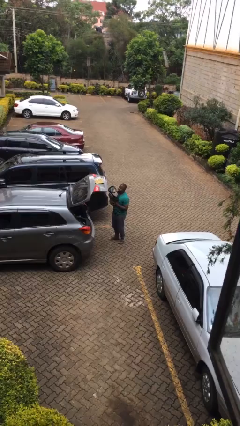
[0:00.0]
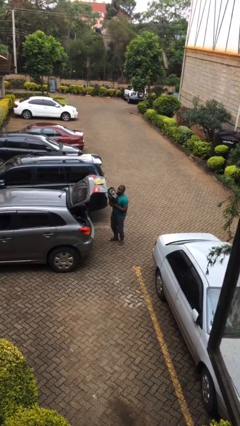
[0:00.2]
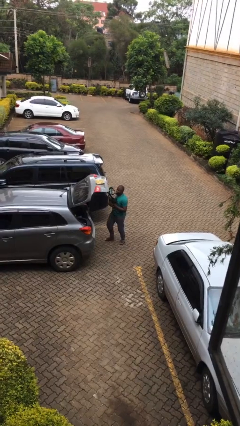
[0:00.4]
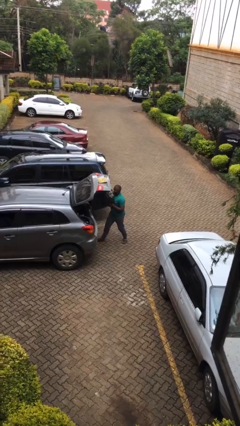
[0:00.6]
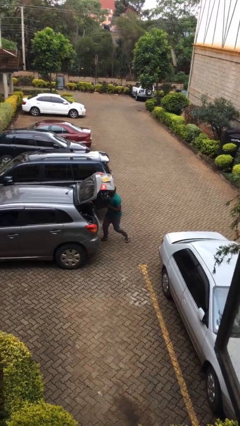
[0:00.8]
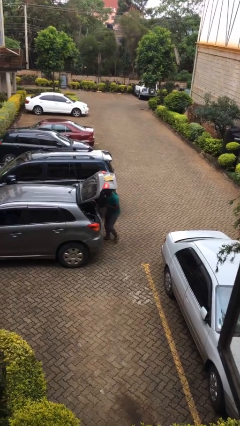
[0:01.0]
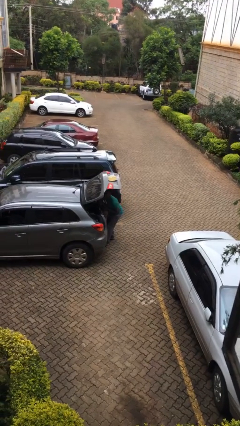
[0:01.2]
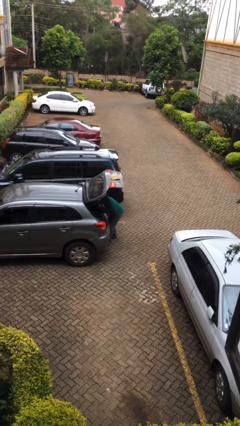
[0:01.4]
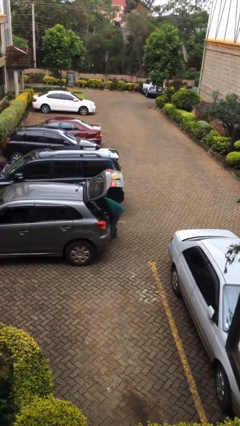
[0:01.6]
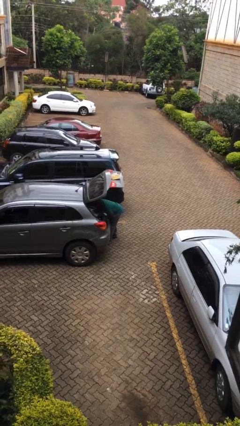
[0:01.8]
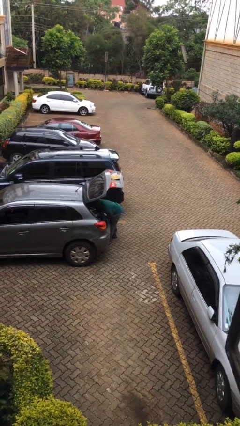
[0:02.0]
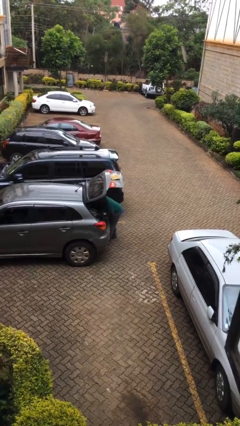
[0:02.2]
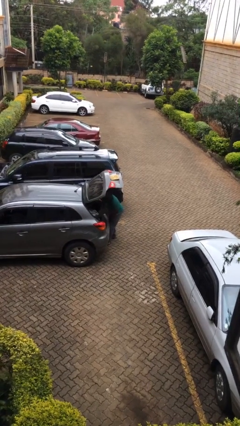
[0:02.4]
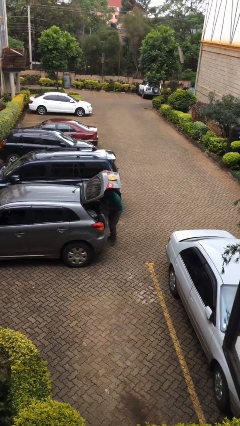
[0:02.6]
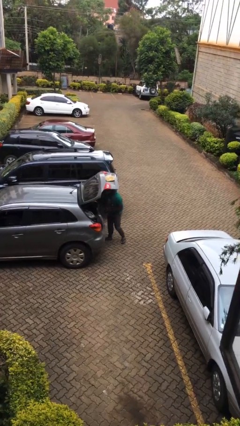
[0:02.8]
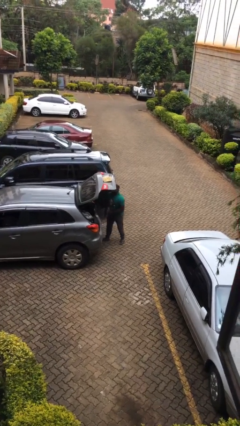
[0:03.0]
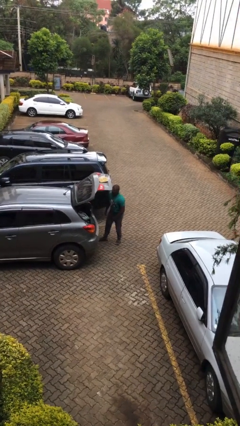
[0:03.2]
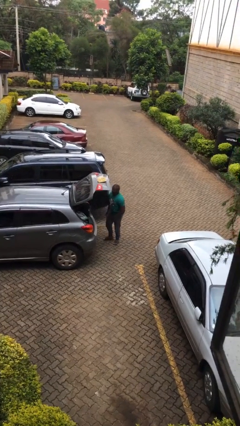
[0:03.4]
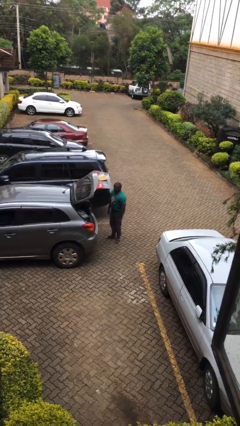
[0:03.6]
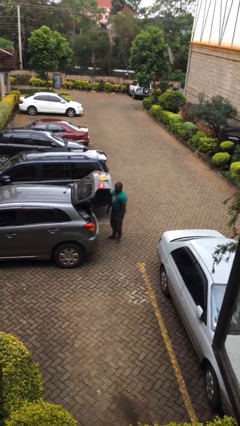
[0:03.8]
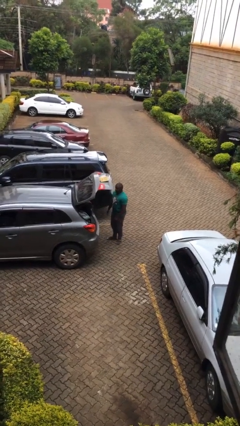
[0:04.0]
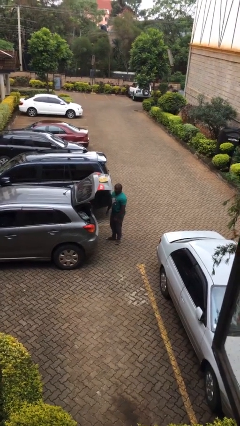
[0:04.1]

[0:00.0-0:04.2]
person loads car

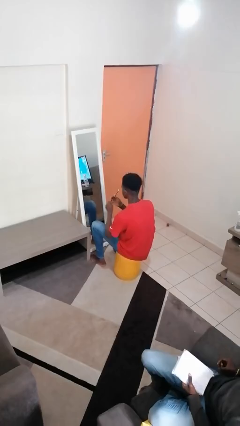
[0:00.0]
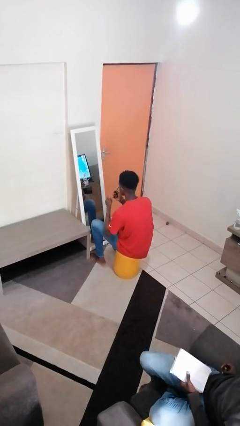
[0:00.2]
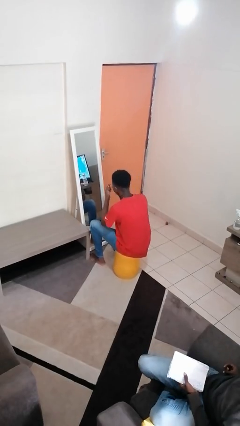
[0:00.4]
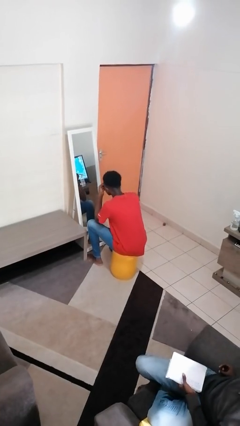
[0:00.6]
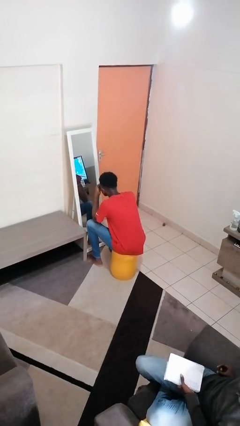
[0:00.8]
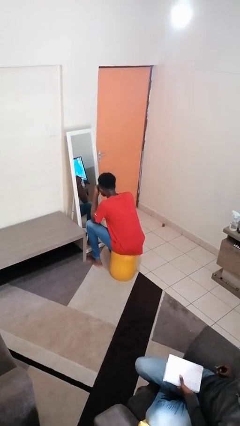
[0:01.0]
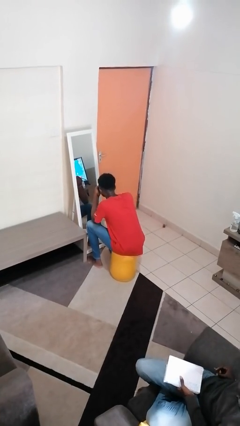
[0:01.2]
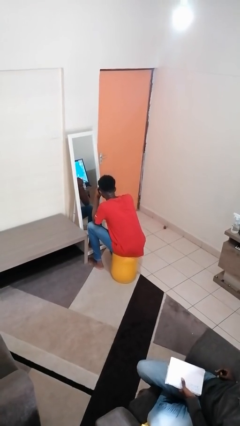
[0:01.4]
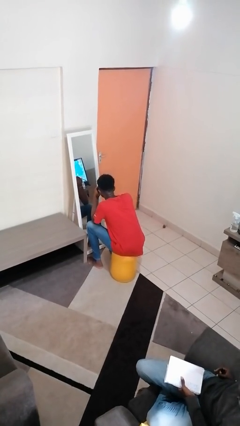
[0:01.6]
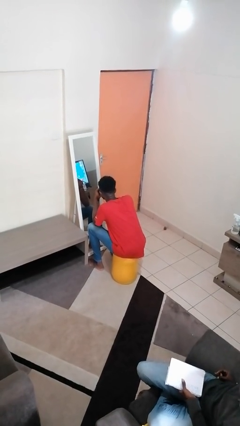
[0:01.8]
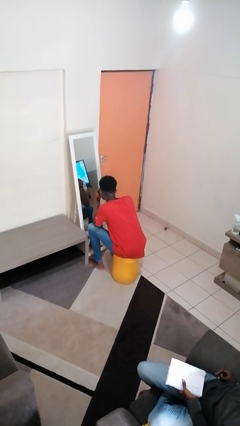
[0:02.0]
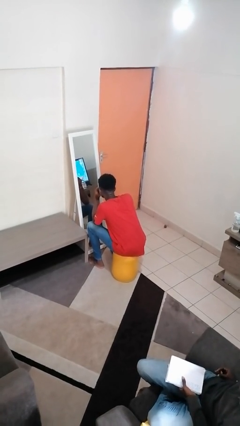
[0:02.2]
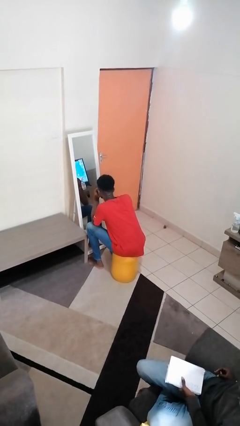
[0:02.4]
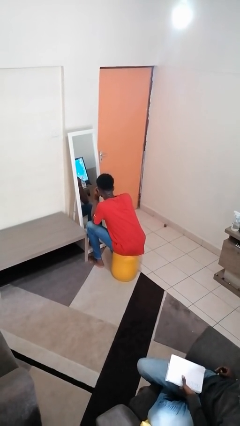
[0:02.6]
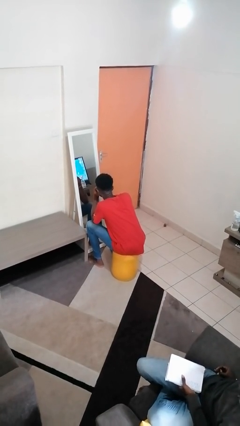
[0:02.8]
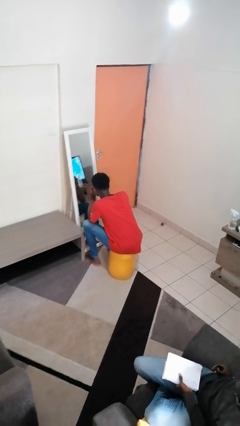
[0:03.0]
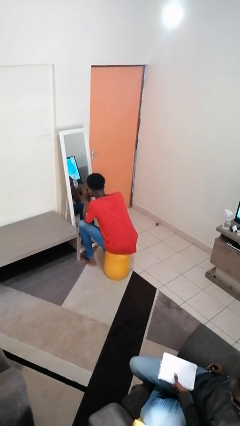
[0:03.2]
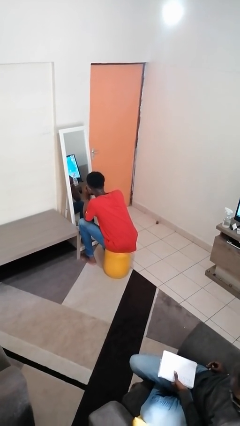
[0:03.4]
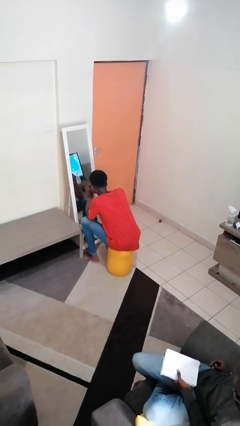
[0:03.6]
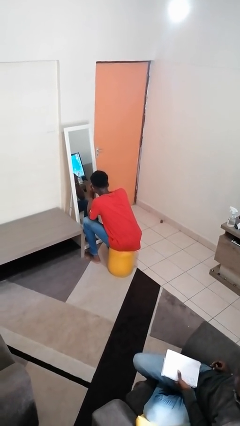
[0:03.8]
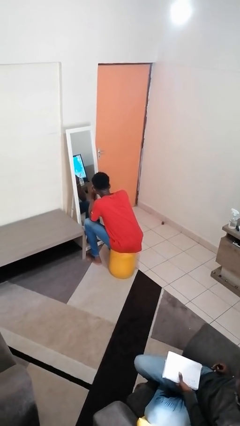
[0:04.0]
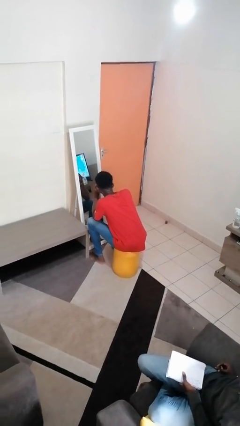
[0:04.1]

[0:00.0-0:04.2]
person applies eye makeup

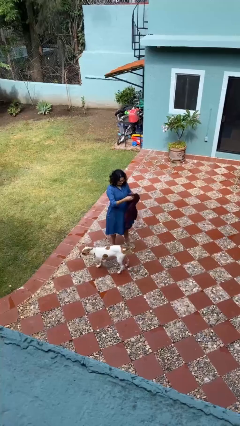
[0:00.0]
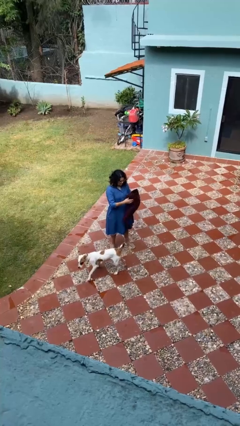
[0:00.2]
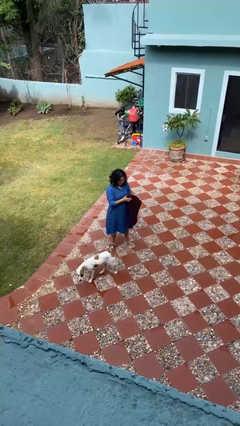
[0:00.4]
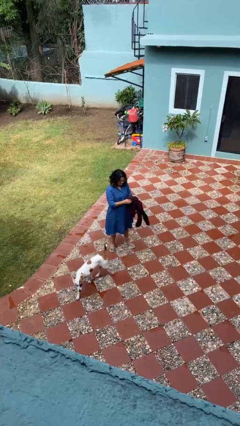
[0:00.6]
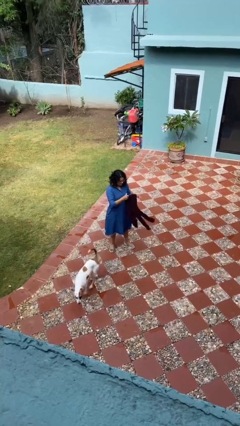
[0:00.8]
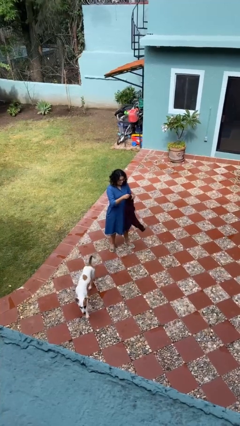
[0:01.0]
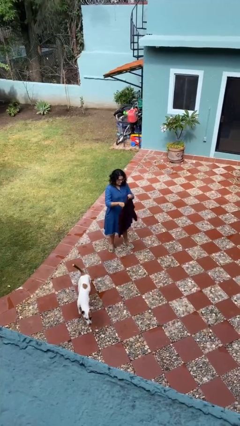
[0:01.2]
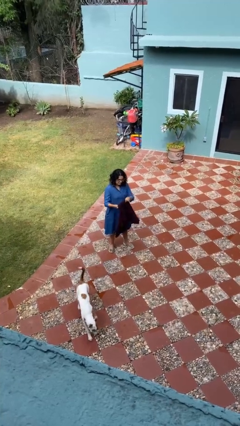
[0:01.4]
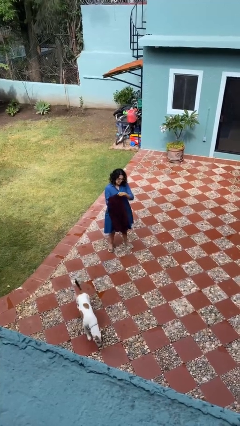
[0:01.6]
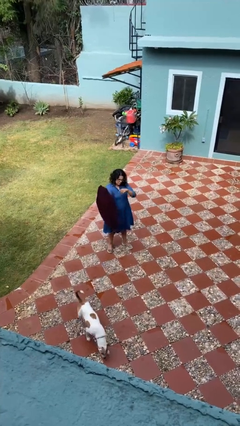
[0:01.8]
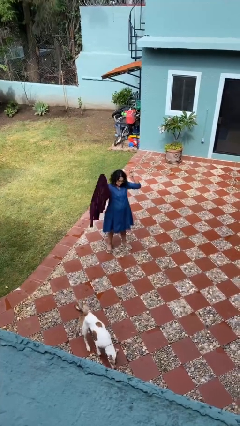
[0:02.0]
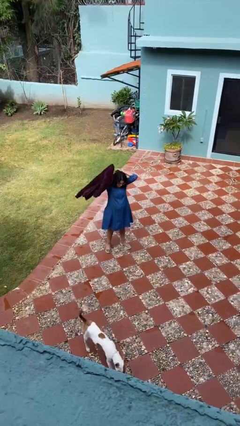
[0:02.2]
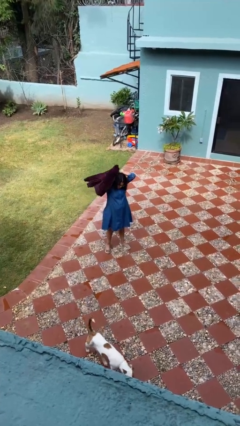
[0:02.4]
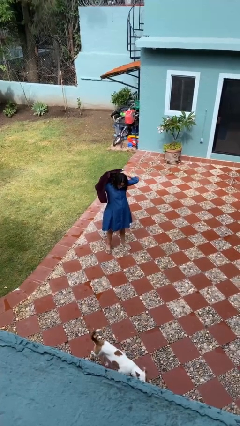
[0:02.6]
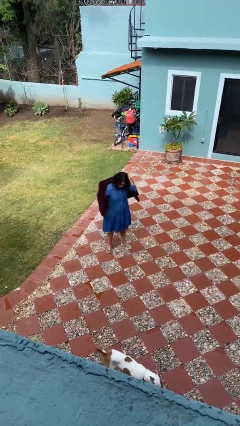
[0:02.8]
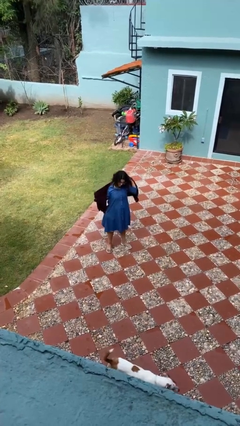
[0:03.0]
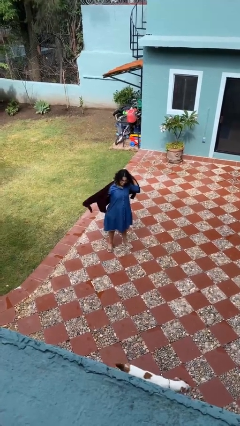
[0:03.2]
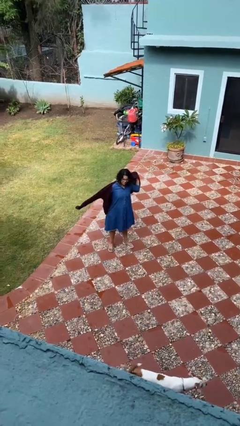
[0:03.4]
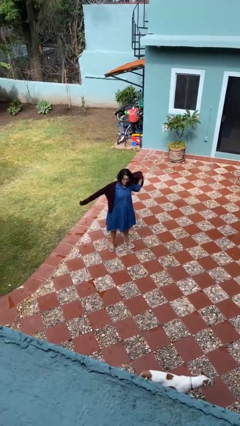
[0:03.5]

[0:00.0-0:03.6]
person puts on jacket

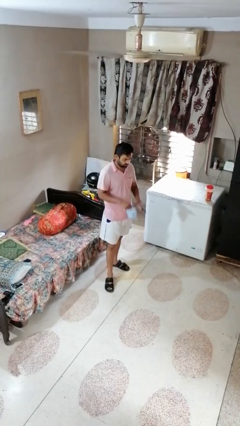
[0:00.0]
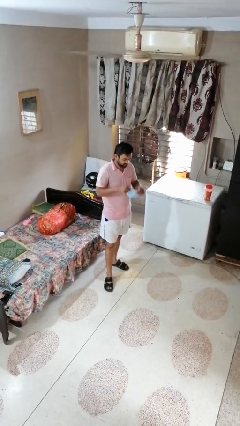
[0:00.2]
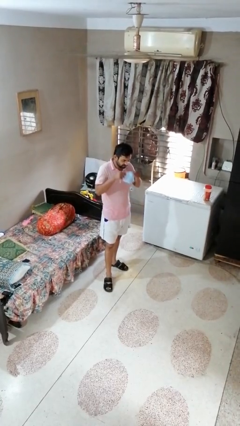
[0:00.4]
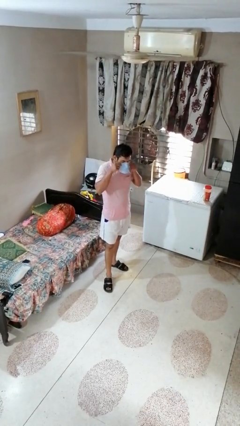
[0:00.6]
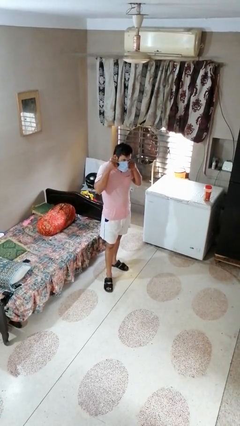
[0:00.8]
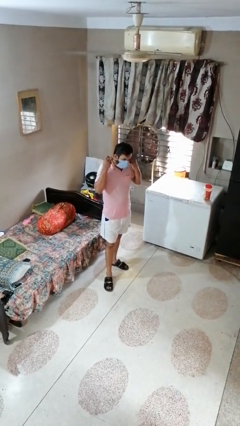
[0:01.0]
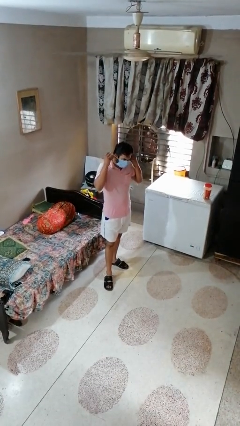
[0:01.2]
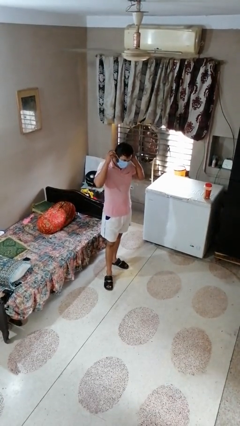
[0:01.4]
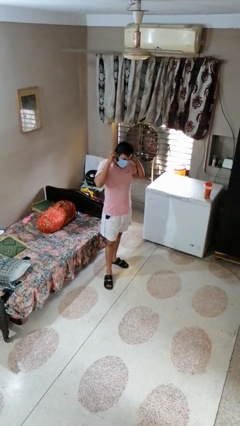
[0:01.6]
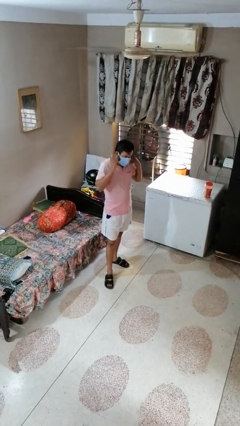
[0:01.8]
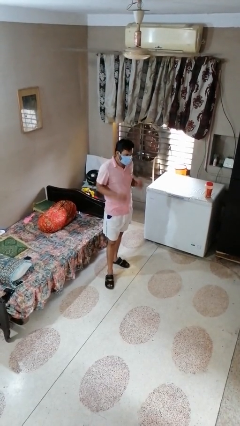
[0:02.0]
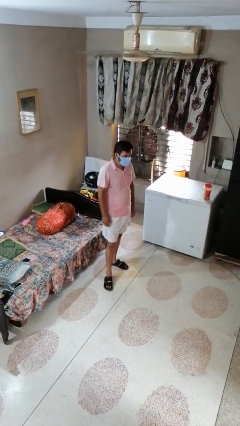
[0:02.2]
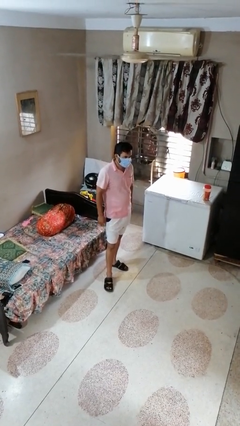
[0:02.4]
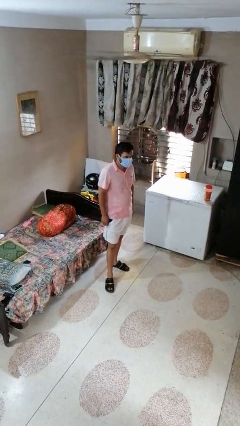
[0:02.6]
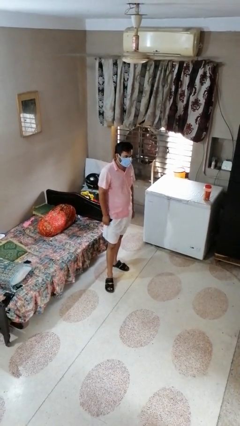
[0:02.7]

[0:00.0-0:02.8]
person puts on facemask

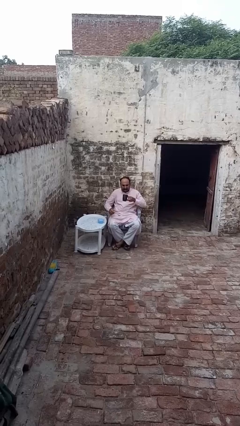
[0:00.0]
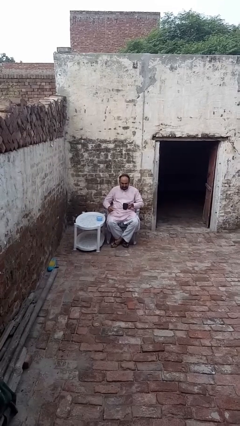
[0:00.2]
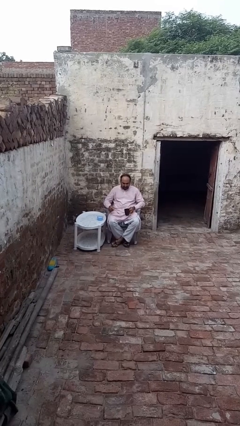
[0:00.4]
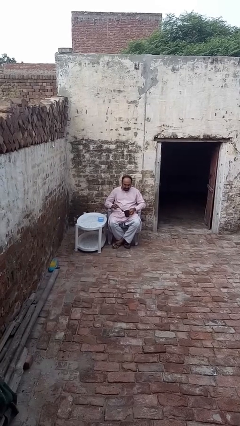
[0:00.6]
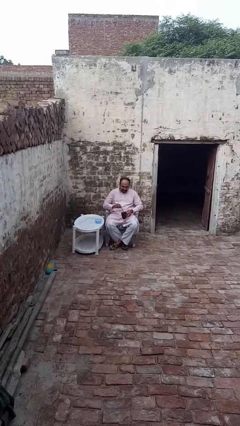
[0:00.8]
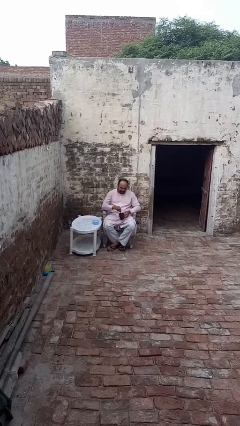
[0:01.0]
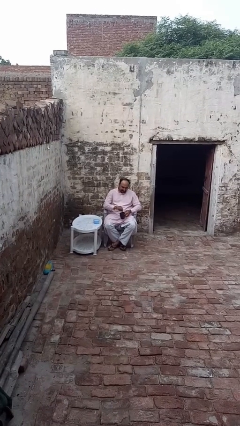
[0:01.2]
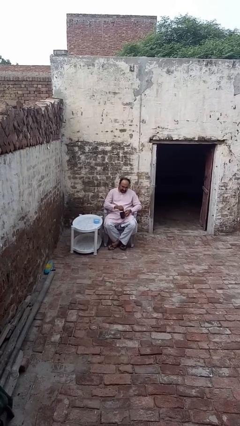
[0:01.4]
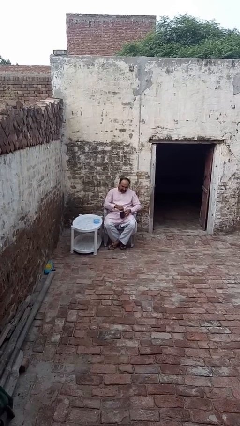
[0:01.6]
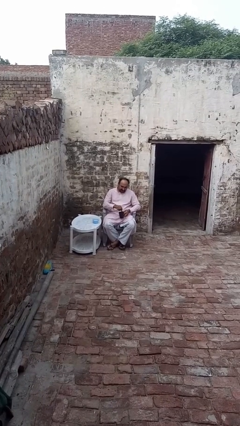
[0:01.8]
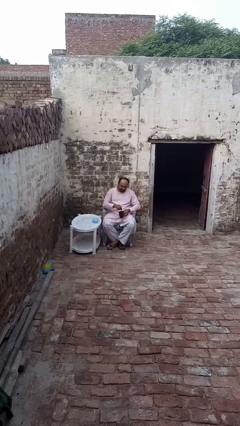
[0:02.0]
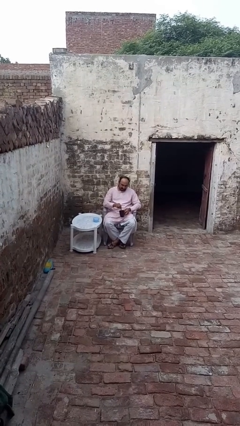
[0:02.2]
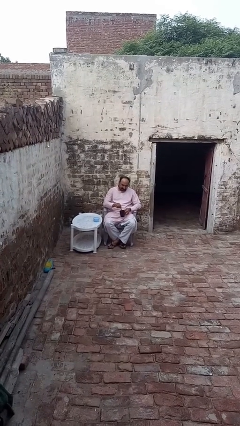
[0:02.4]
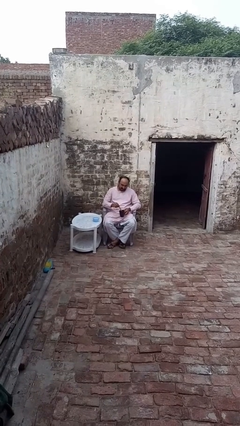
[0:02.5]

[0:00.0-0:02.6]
person stirs mug
